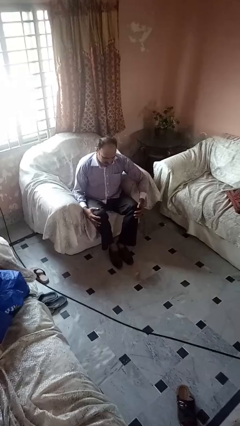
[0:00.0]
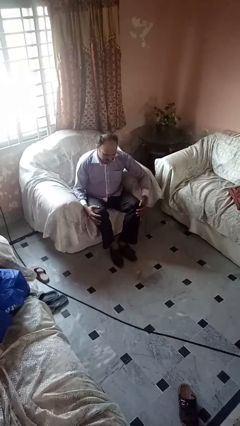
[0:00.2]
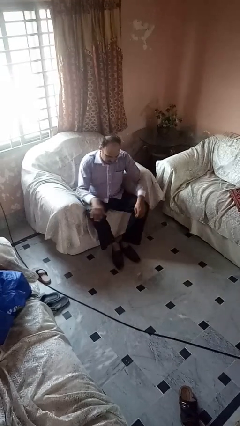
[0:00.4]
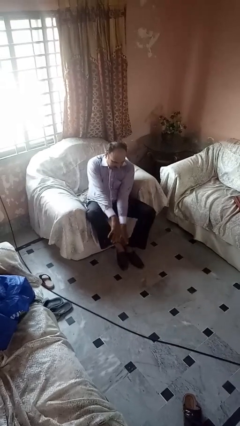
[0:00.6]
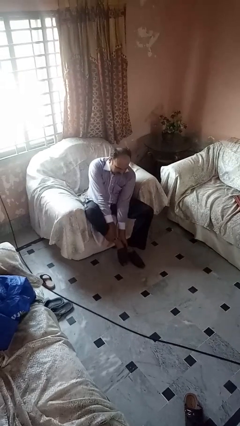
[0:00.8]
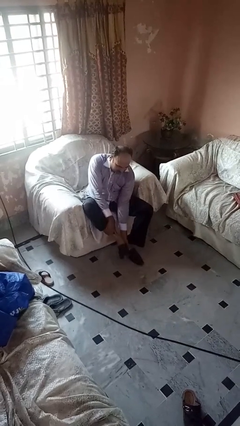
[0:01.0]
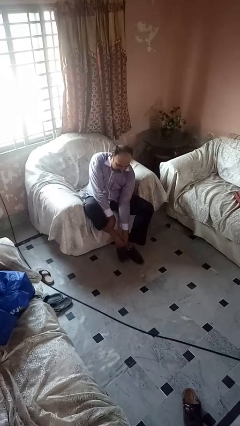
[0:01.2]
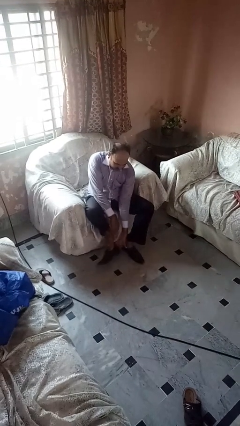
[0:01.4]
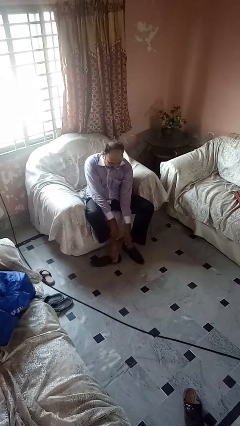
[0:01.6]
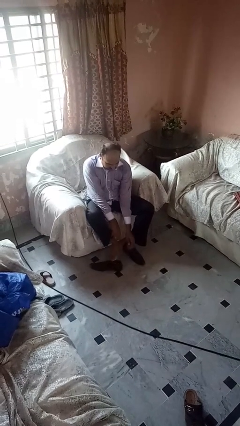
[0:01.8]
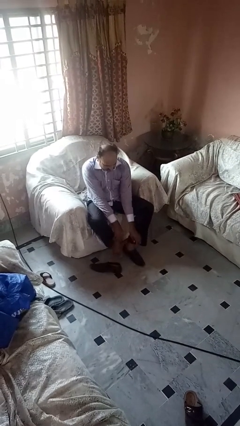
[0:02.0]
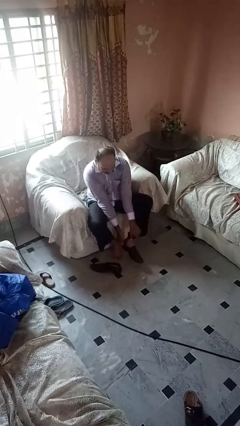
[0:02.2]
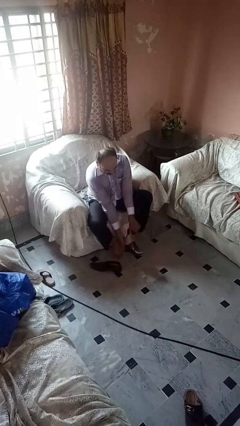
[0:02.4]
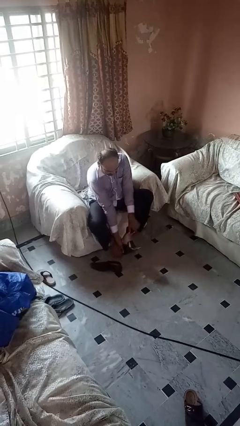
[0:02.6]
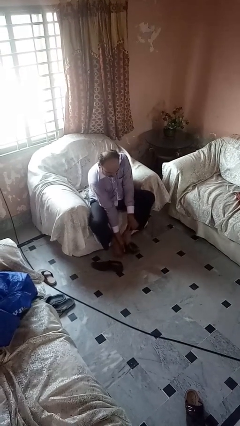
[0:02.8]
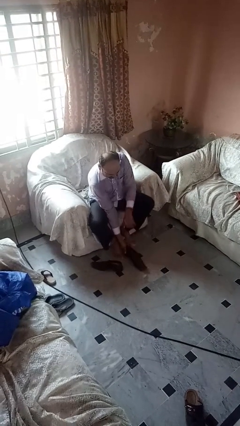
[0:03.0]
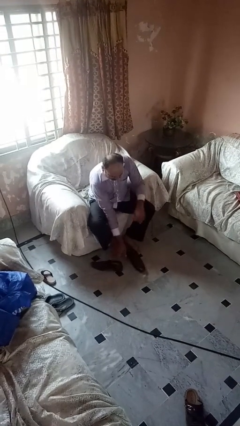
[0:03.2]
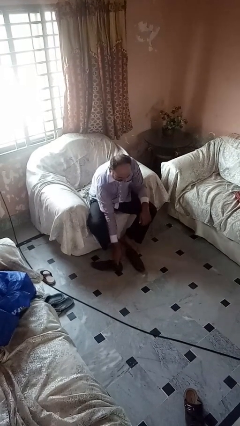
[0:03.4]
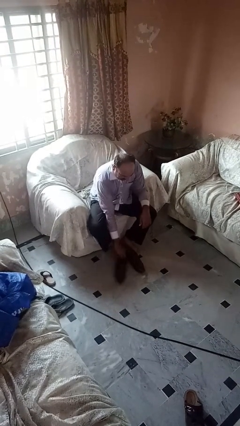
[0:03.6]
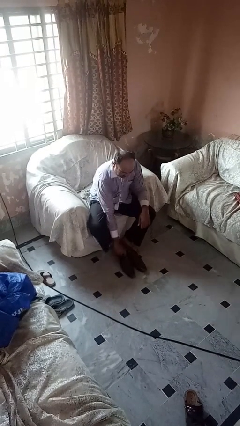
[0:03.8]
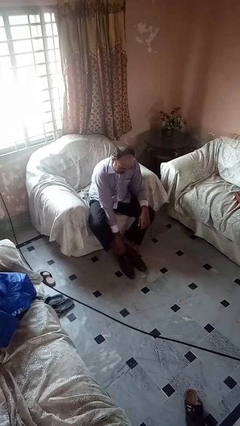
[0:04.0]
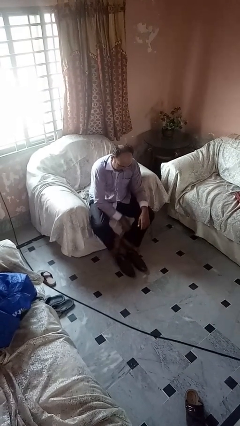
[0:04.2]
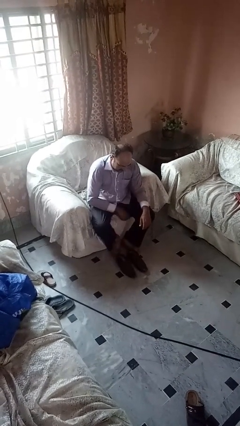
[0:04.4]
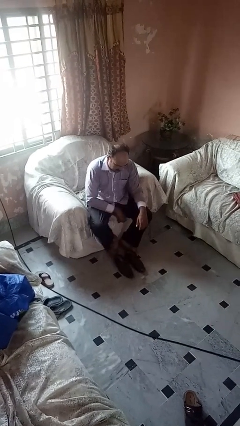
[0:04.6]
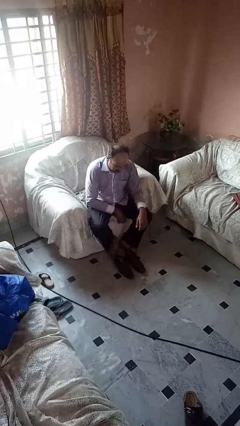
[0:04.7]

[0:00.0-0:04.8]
person takes off boots

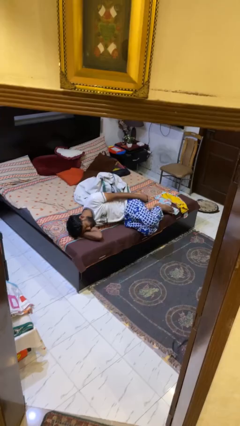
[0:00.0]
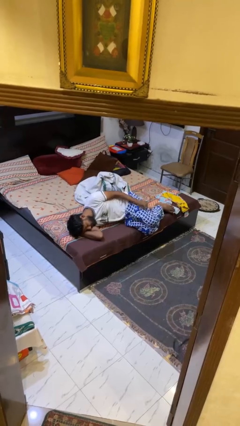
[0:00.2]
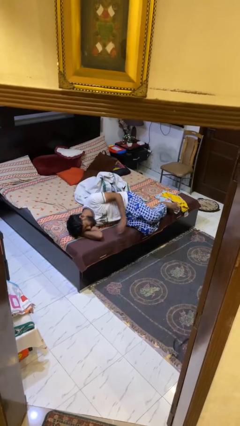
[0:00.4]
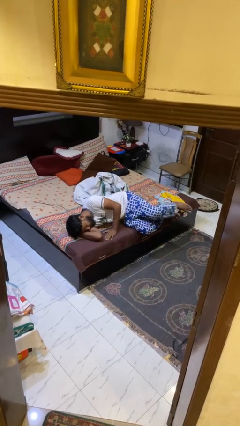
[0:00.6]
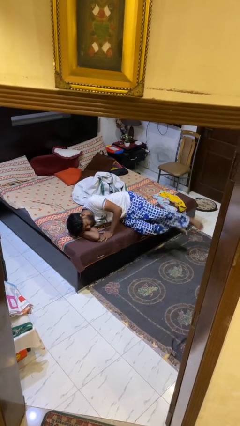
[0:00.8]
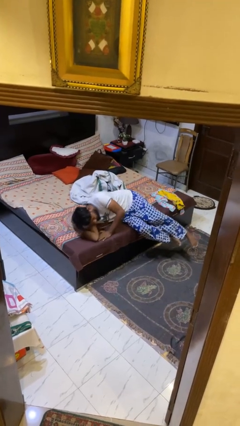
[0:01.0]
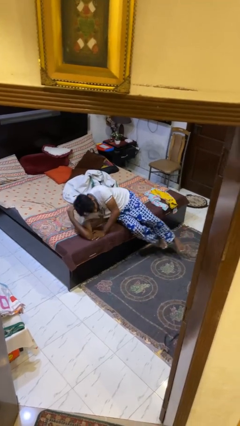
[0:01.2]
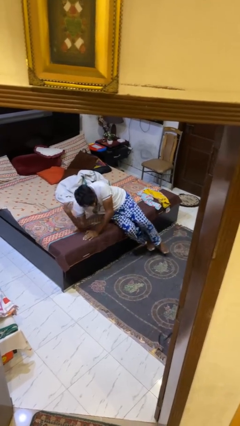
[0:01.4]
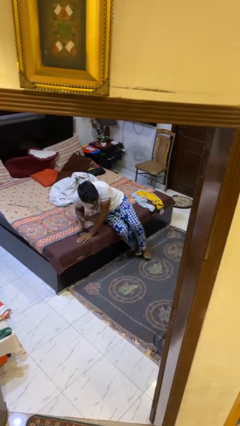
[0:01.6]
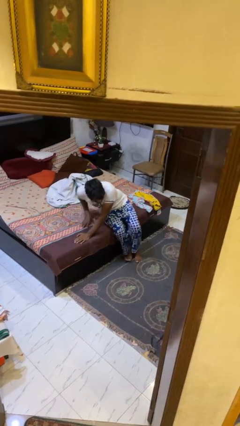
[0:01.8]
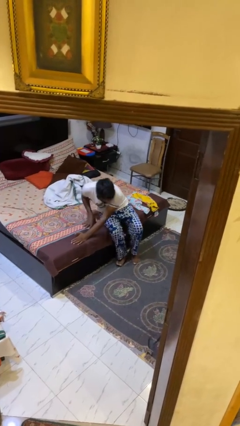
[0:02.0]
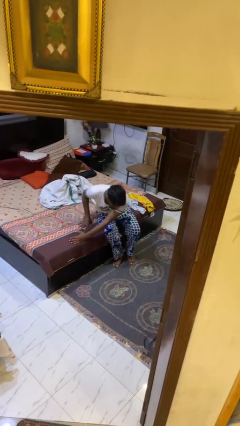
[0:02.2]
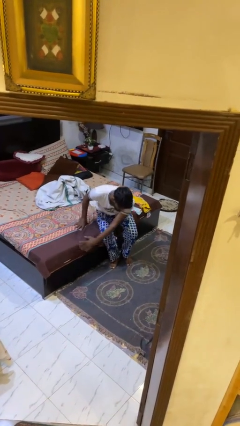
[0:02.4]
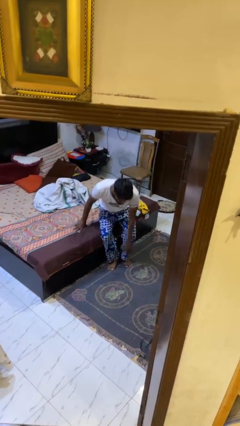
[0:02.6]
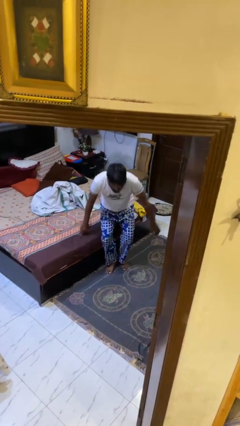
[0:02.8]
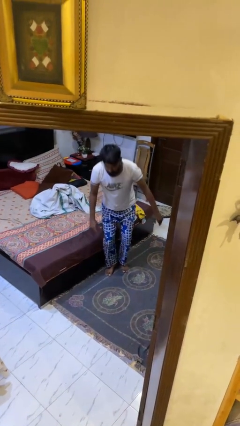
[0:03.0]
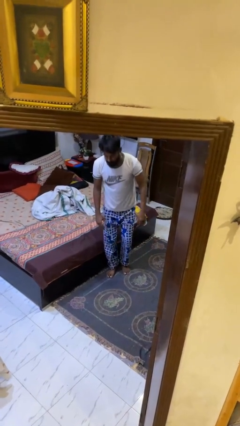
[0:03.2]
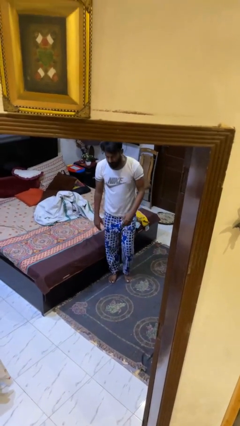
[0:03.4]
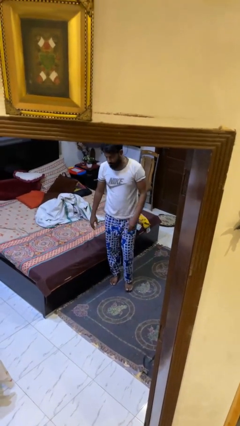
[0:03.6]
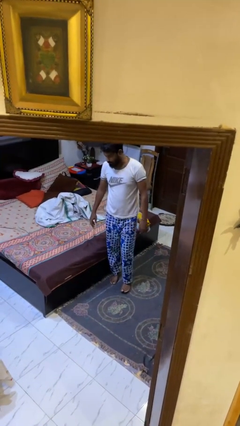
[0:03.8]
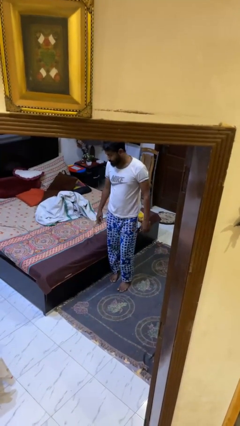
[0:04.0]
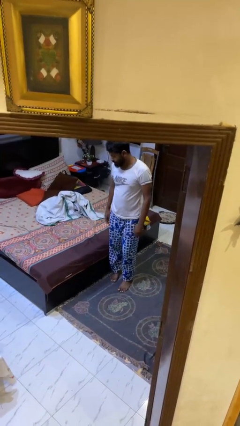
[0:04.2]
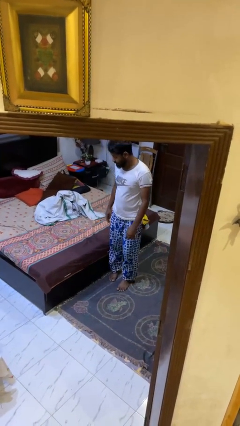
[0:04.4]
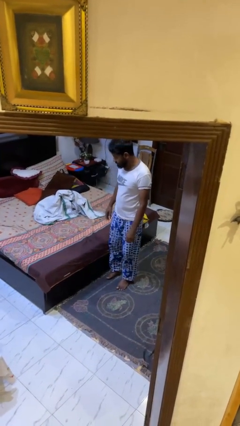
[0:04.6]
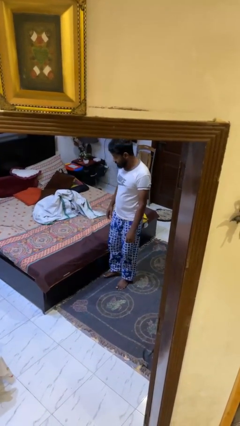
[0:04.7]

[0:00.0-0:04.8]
person stands up

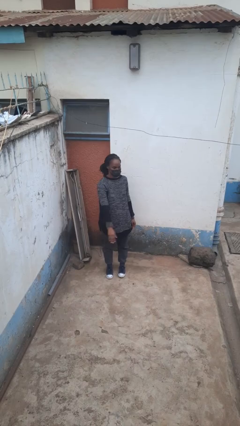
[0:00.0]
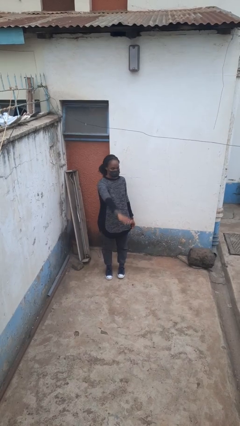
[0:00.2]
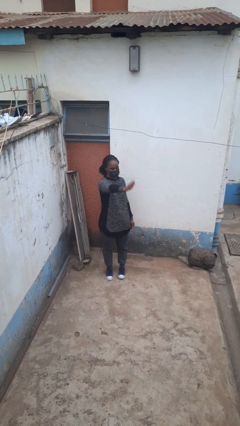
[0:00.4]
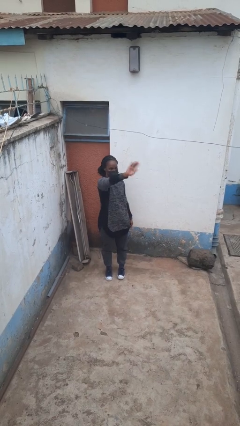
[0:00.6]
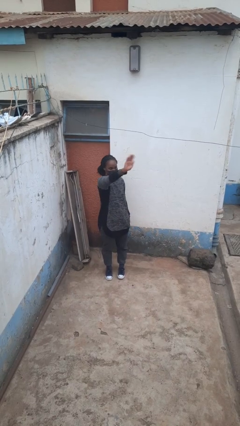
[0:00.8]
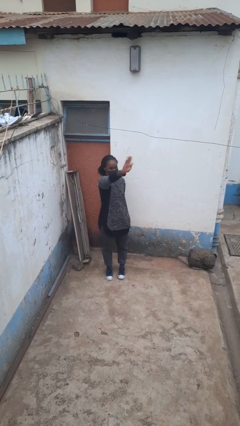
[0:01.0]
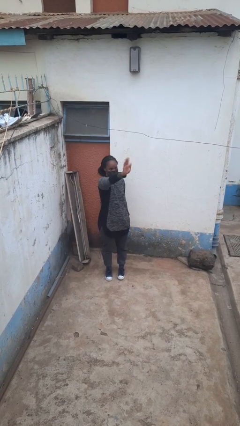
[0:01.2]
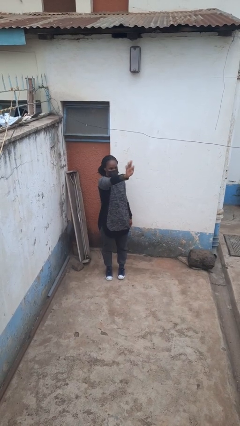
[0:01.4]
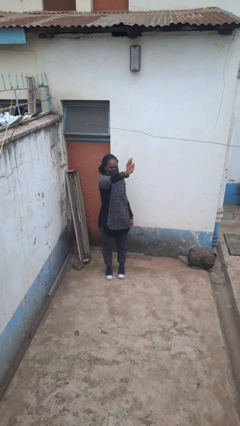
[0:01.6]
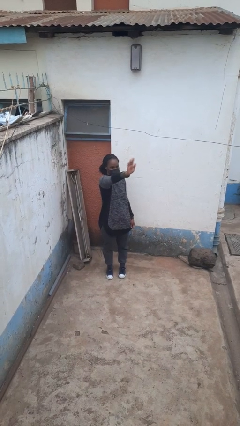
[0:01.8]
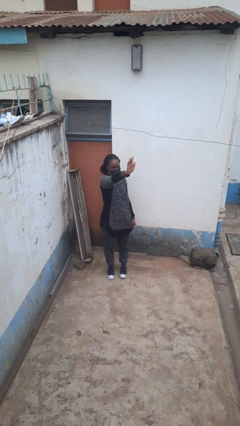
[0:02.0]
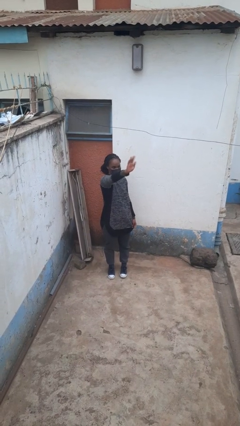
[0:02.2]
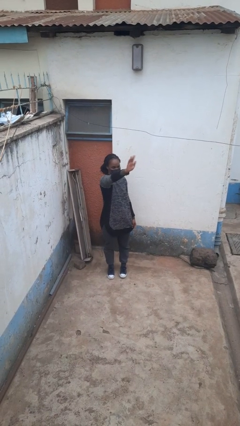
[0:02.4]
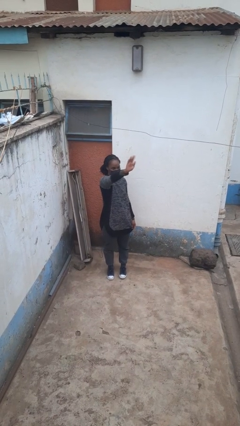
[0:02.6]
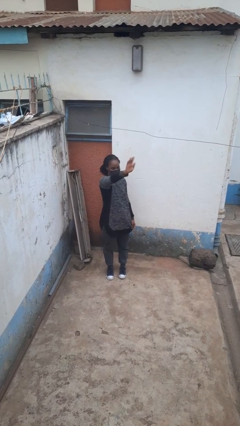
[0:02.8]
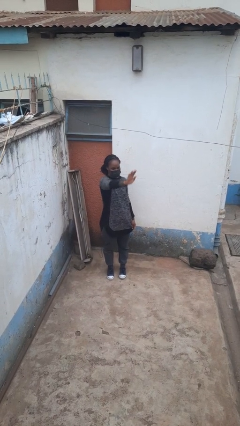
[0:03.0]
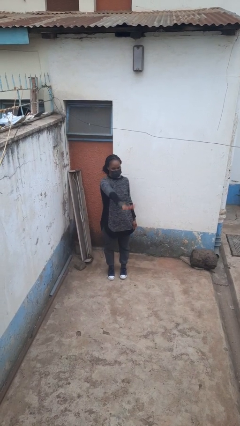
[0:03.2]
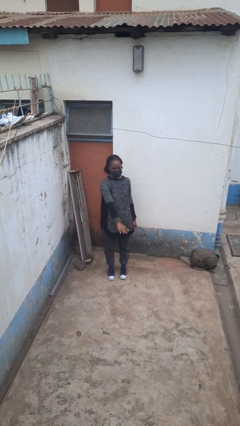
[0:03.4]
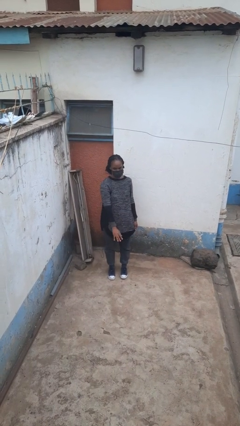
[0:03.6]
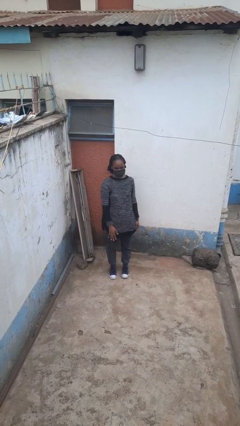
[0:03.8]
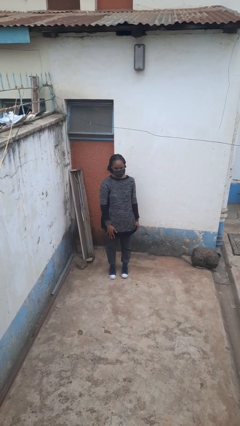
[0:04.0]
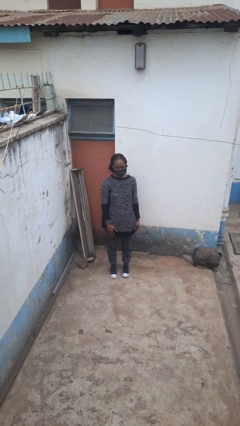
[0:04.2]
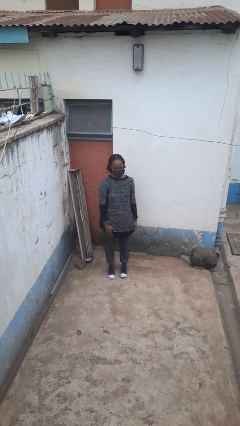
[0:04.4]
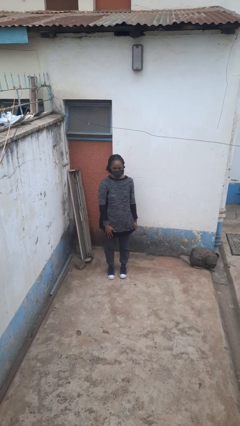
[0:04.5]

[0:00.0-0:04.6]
person waves at person

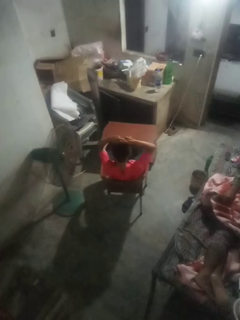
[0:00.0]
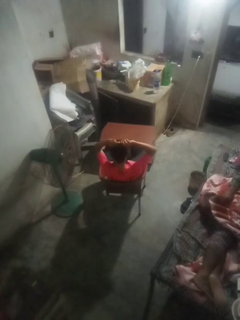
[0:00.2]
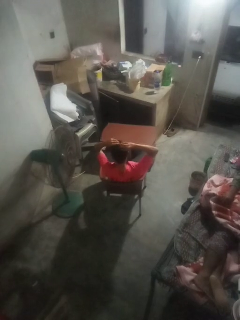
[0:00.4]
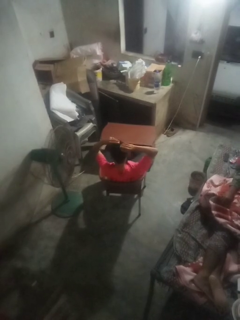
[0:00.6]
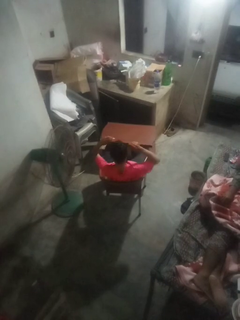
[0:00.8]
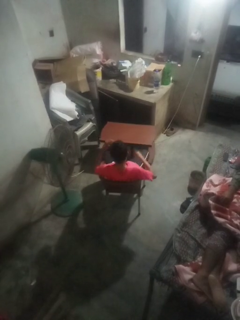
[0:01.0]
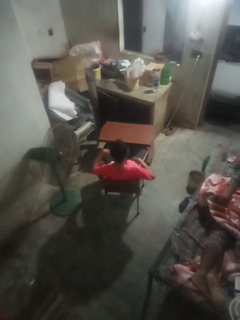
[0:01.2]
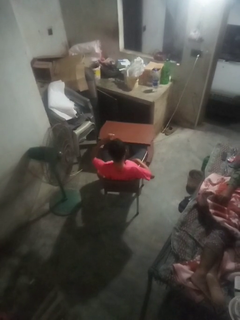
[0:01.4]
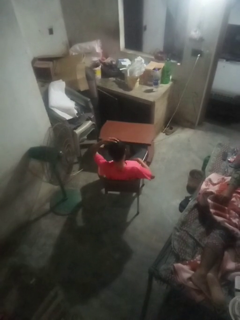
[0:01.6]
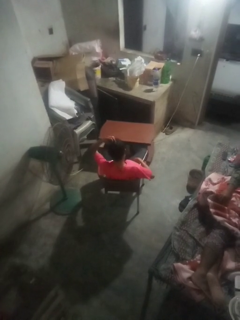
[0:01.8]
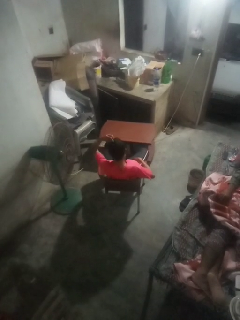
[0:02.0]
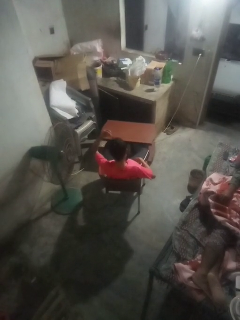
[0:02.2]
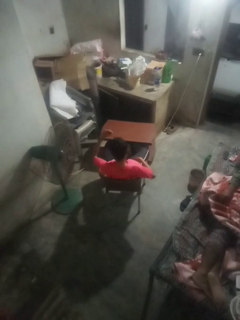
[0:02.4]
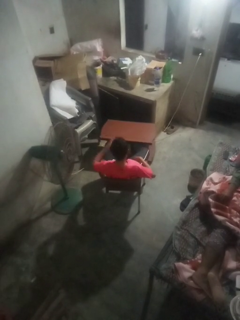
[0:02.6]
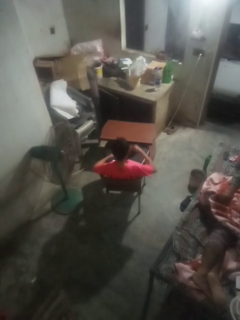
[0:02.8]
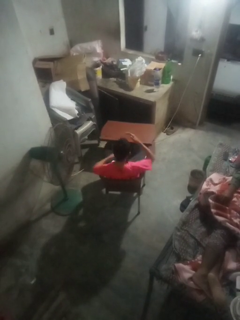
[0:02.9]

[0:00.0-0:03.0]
person takes off hairtie

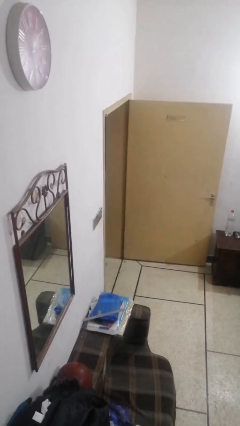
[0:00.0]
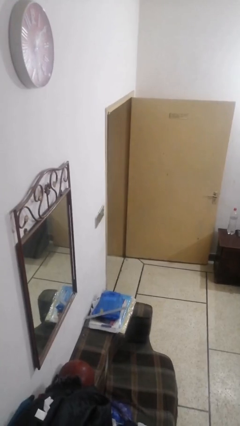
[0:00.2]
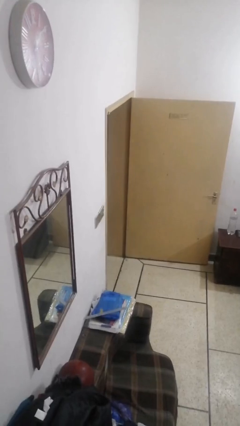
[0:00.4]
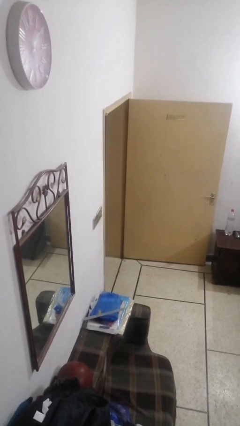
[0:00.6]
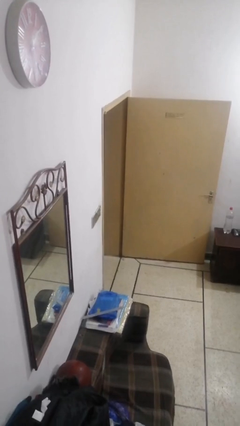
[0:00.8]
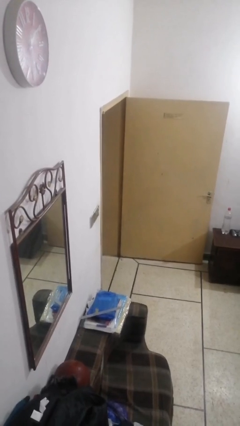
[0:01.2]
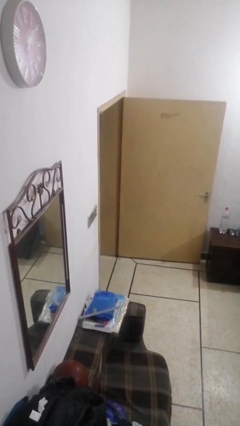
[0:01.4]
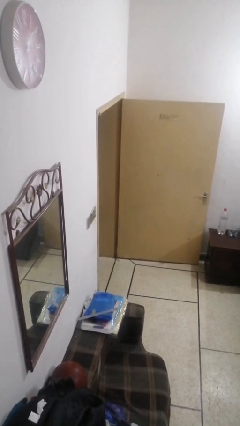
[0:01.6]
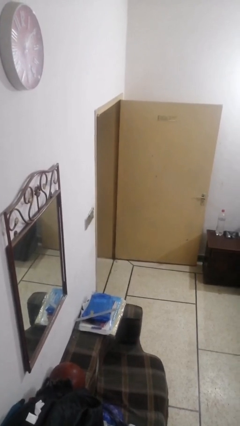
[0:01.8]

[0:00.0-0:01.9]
person exits scene through structure
